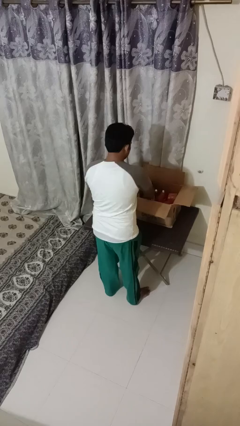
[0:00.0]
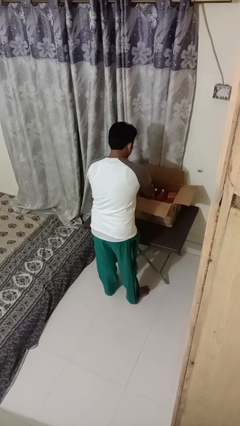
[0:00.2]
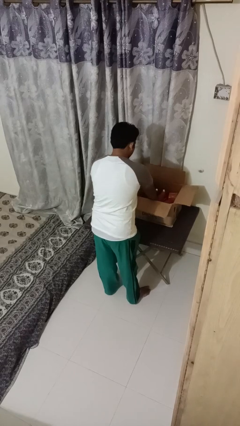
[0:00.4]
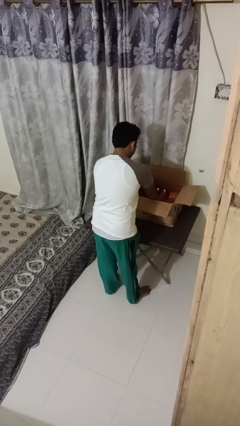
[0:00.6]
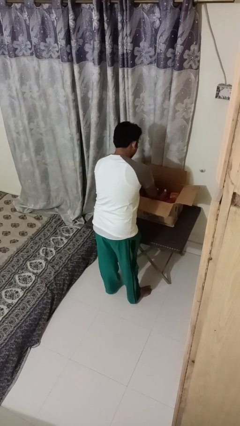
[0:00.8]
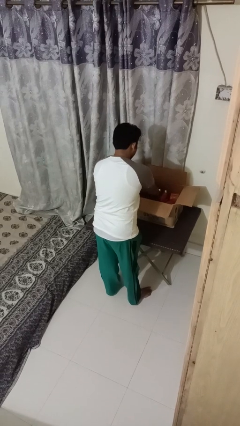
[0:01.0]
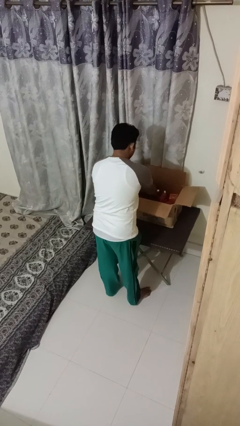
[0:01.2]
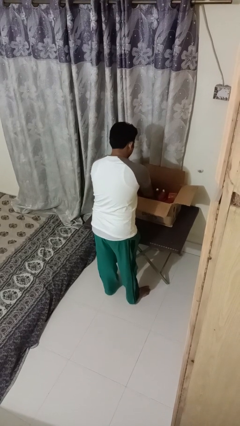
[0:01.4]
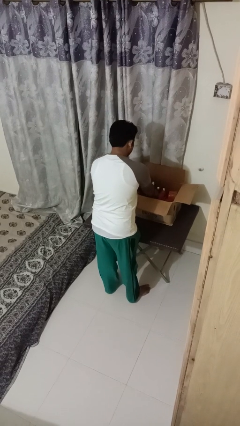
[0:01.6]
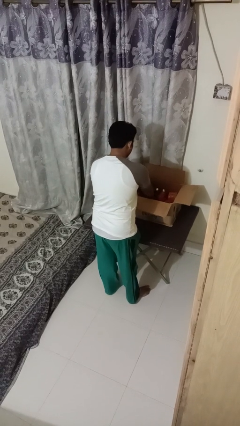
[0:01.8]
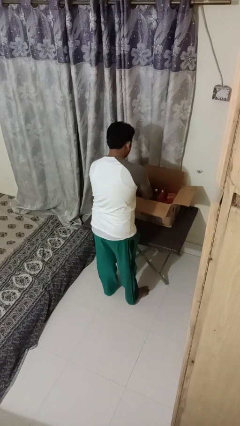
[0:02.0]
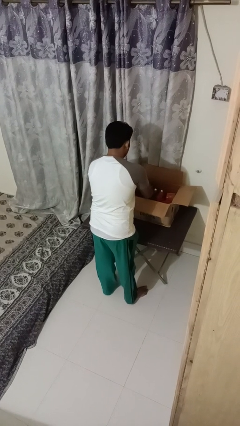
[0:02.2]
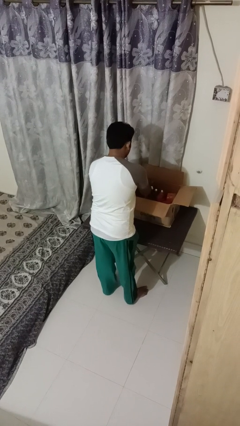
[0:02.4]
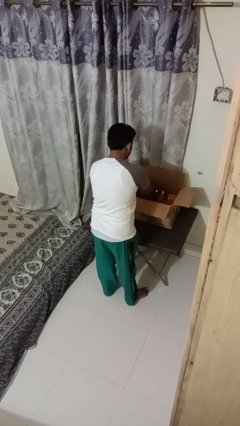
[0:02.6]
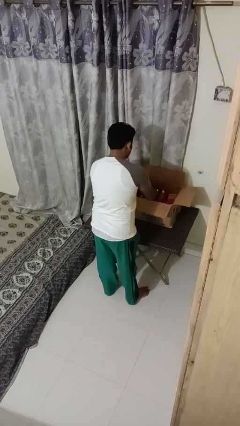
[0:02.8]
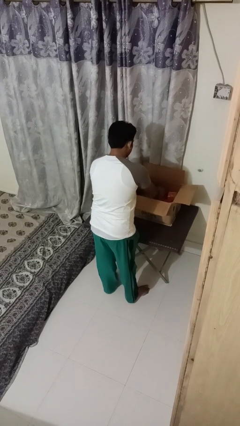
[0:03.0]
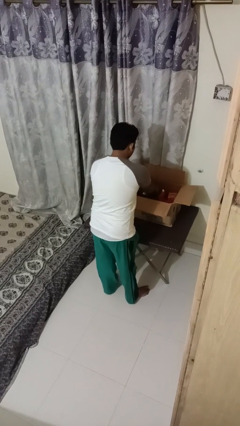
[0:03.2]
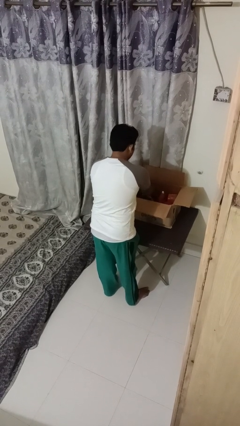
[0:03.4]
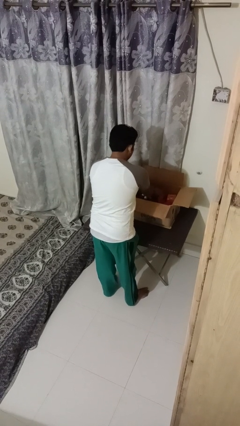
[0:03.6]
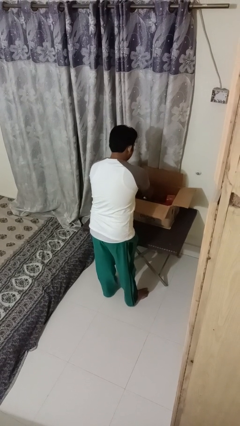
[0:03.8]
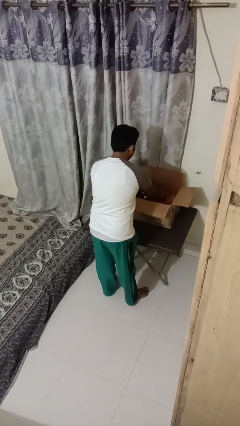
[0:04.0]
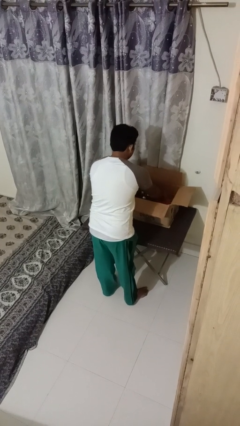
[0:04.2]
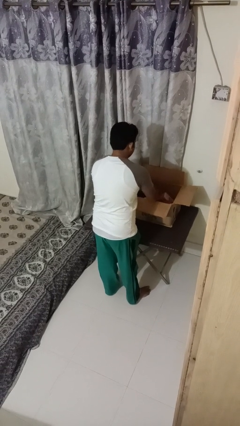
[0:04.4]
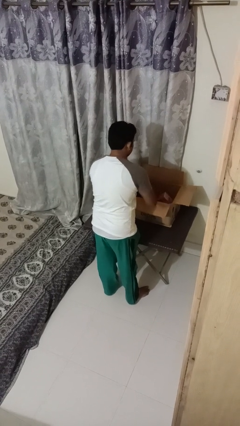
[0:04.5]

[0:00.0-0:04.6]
person searches in box

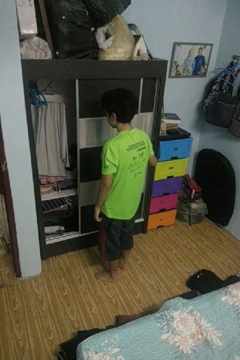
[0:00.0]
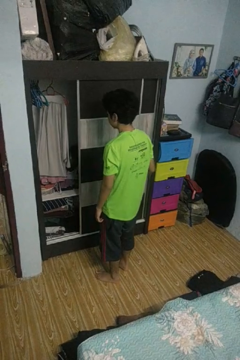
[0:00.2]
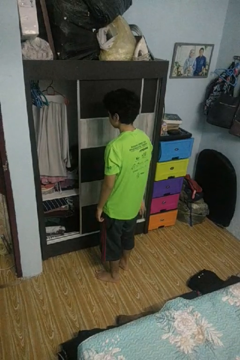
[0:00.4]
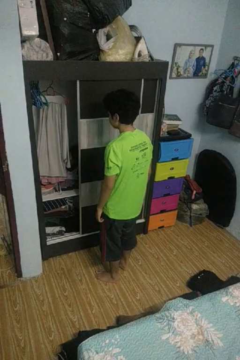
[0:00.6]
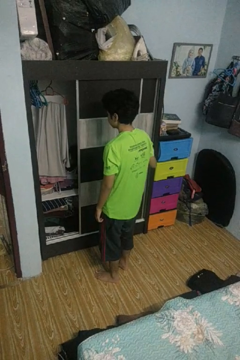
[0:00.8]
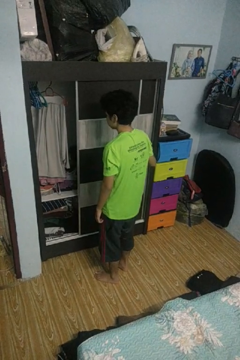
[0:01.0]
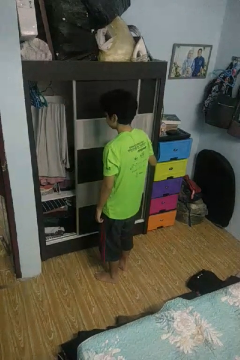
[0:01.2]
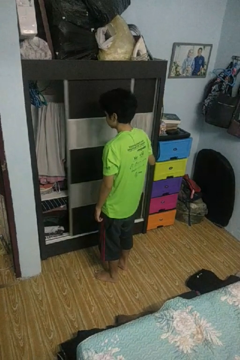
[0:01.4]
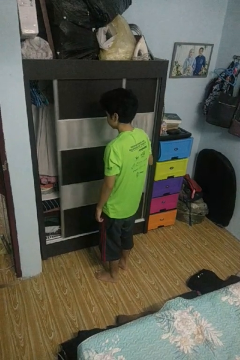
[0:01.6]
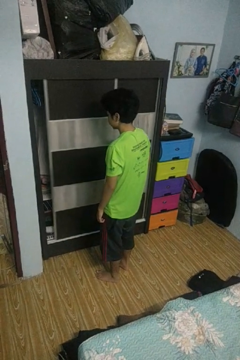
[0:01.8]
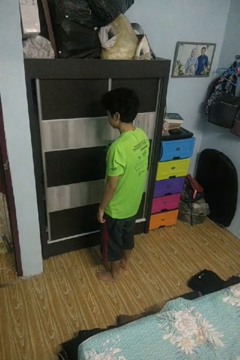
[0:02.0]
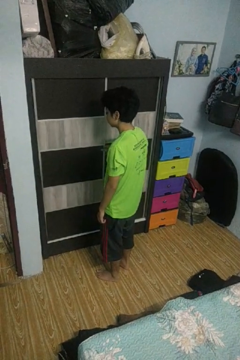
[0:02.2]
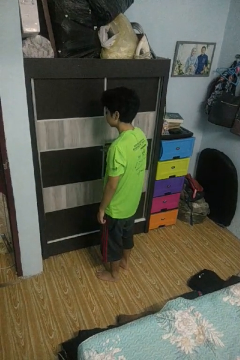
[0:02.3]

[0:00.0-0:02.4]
person closes closet door

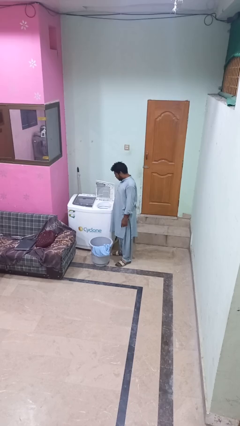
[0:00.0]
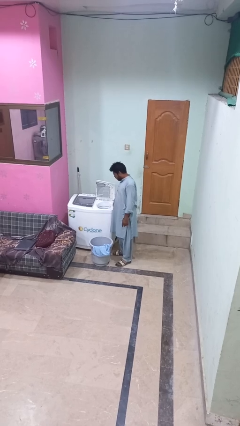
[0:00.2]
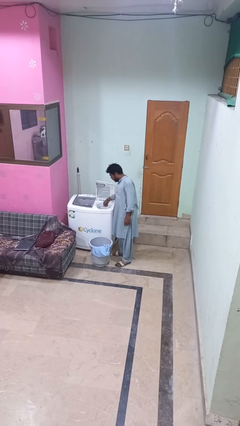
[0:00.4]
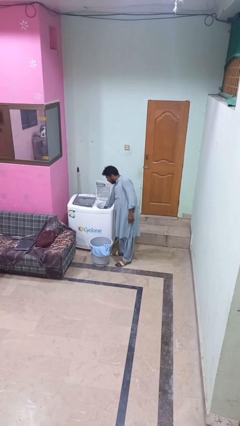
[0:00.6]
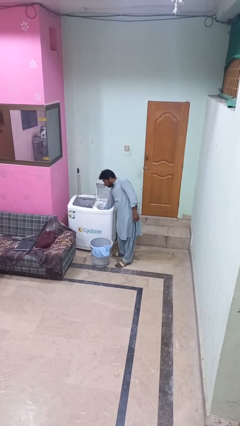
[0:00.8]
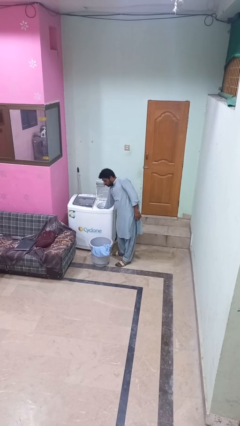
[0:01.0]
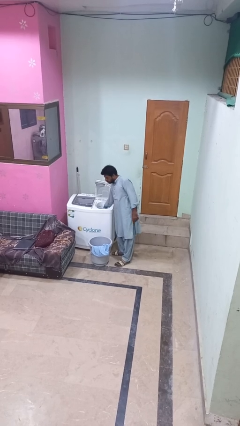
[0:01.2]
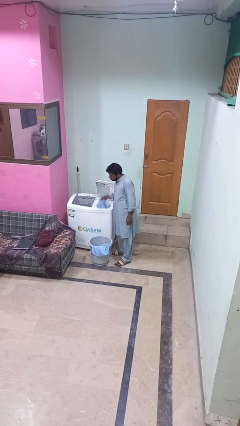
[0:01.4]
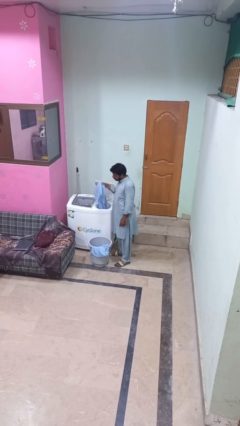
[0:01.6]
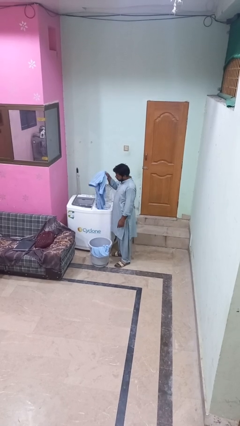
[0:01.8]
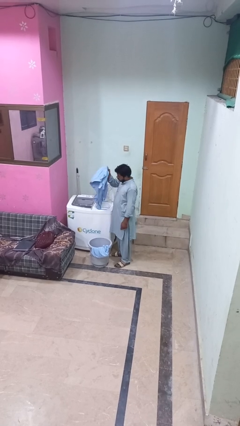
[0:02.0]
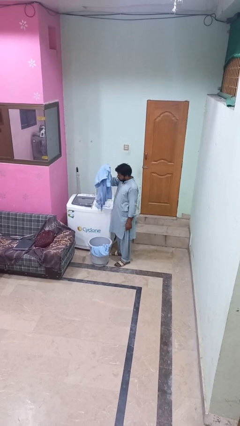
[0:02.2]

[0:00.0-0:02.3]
person unloads dryer

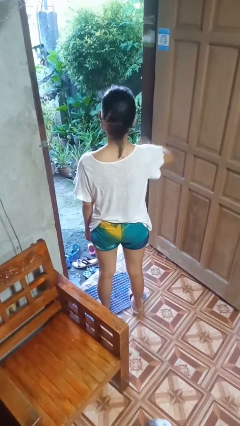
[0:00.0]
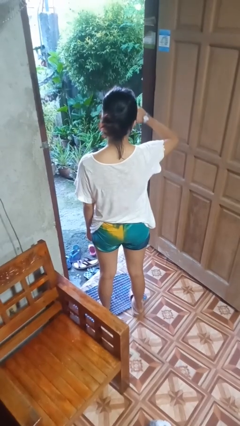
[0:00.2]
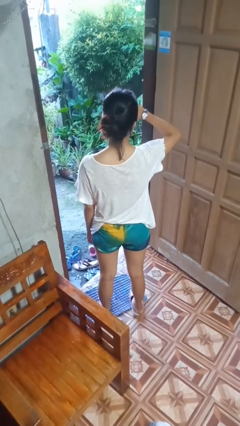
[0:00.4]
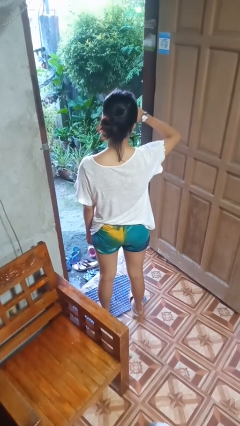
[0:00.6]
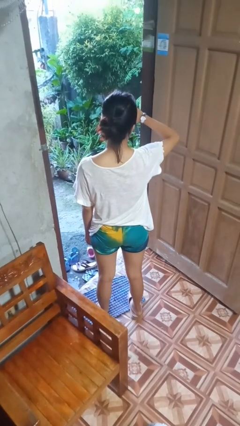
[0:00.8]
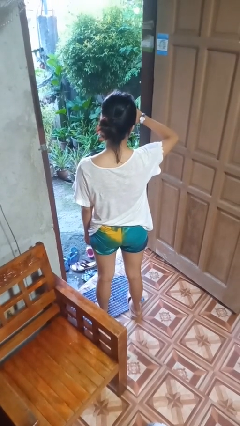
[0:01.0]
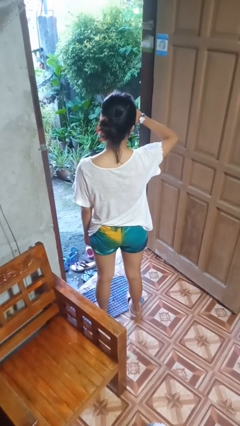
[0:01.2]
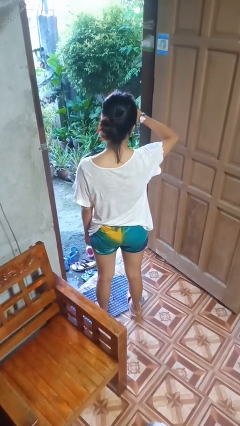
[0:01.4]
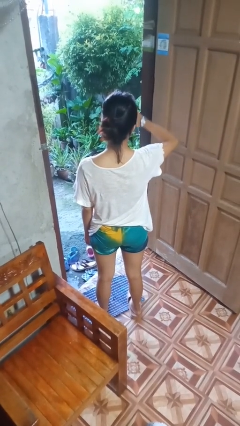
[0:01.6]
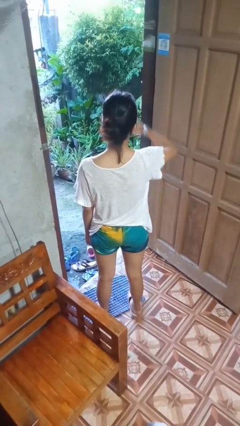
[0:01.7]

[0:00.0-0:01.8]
person looks at wristwatch

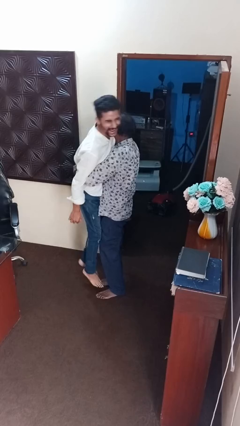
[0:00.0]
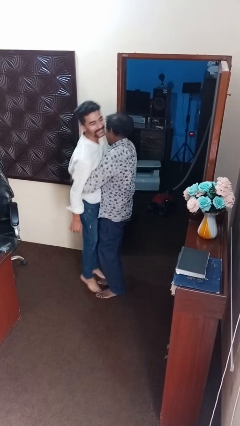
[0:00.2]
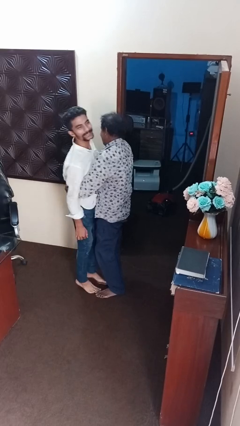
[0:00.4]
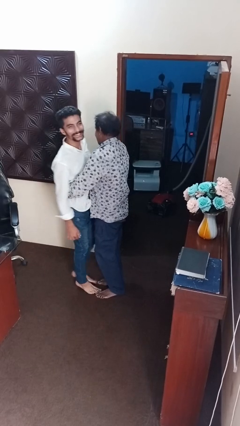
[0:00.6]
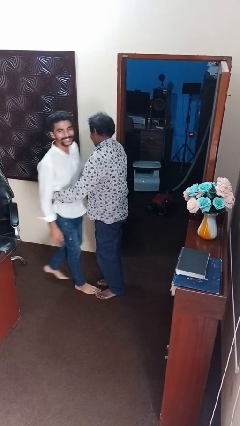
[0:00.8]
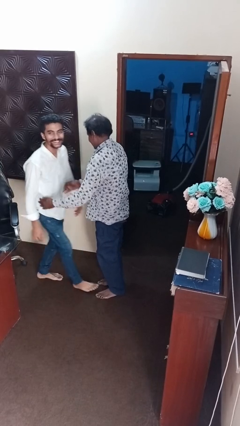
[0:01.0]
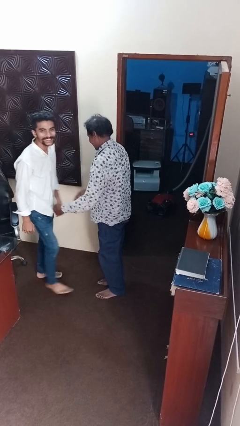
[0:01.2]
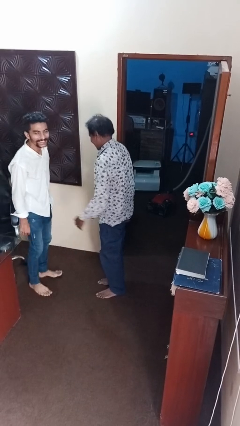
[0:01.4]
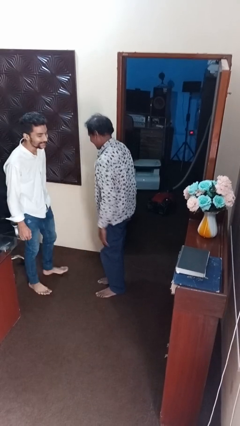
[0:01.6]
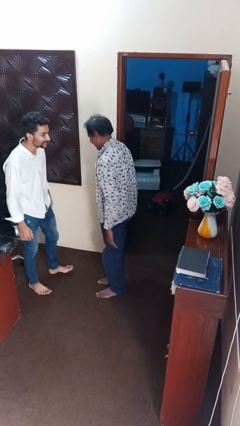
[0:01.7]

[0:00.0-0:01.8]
person puts down person

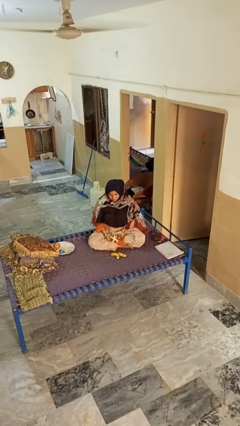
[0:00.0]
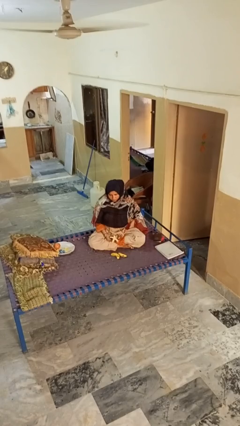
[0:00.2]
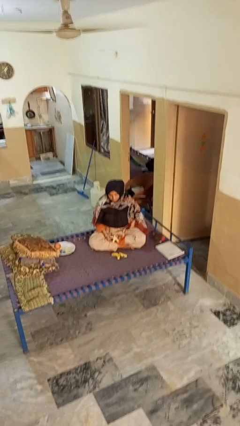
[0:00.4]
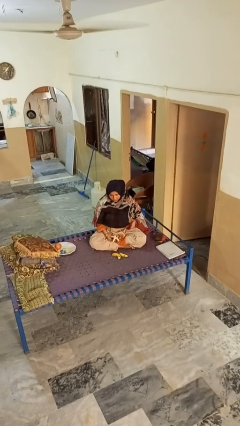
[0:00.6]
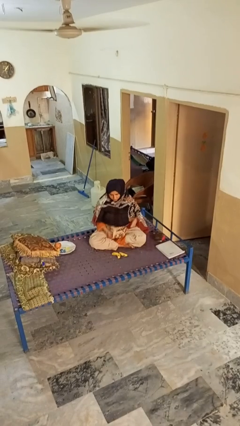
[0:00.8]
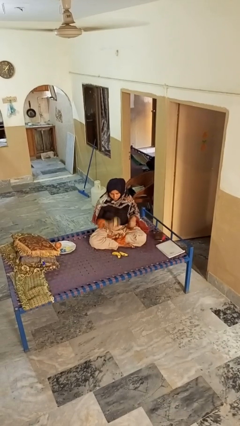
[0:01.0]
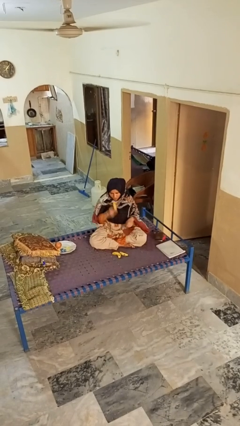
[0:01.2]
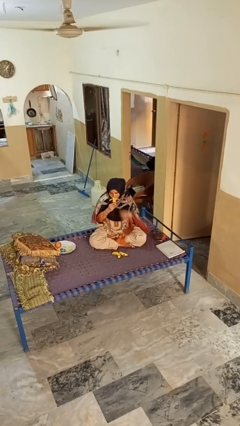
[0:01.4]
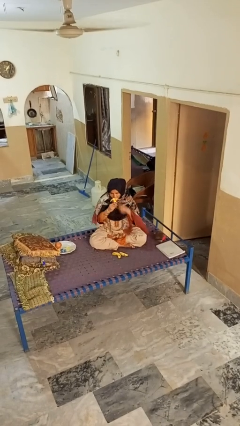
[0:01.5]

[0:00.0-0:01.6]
person eats banana

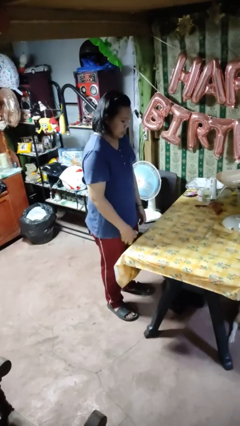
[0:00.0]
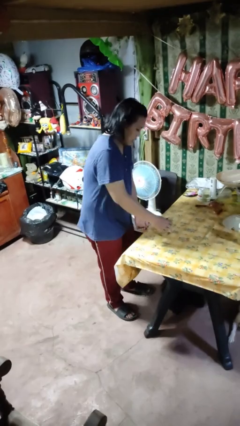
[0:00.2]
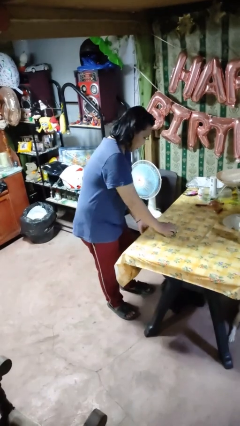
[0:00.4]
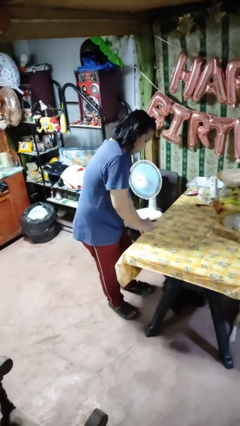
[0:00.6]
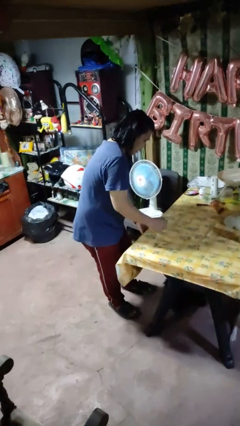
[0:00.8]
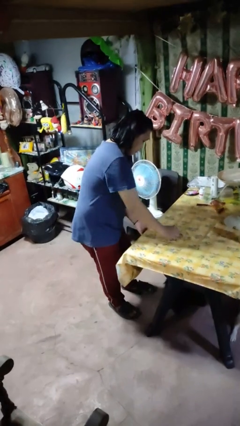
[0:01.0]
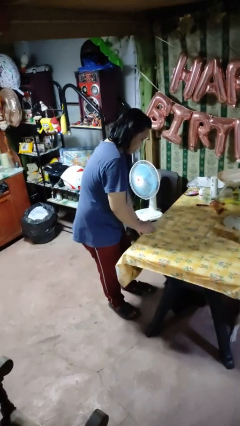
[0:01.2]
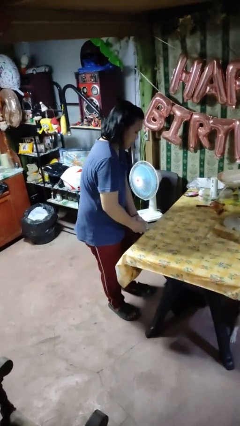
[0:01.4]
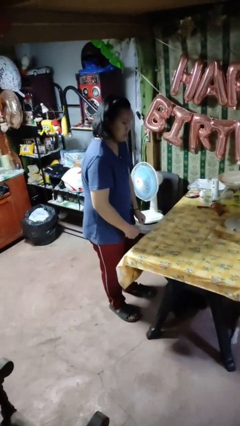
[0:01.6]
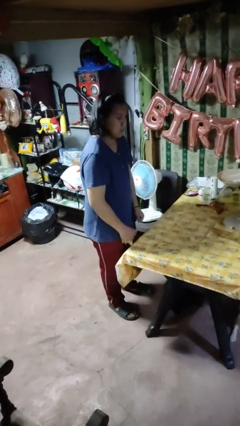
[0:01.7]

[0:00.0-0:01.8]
person cleans table with rag

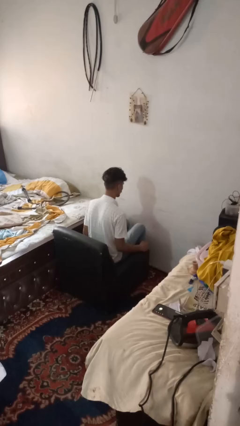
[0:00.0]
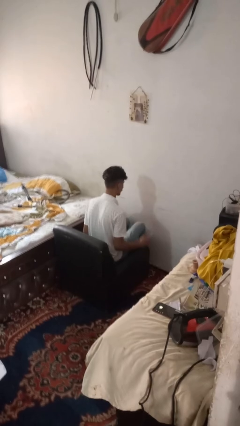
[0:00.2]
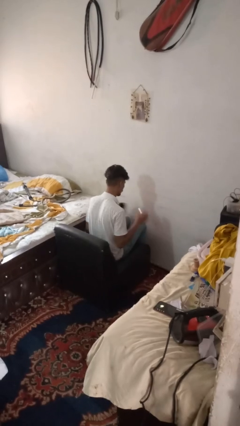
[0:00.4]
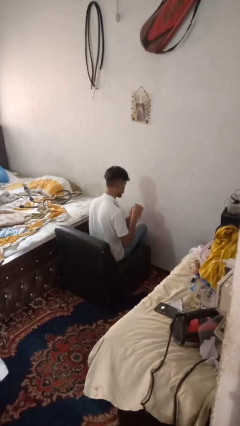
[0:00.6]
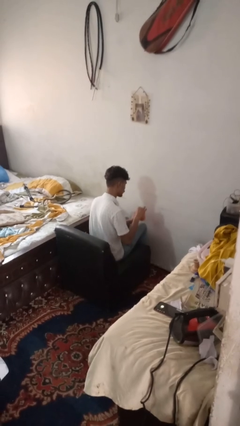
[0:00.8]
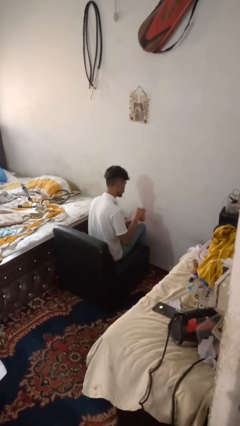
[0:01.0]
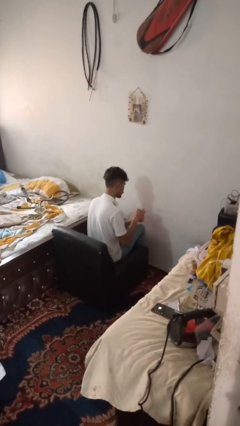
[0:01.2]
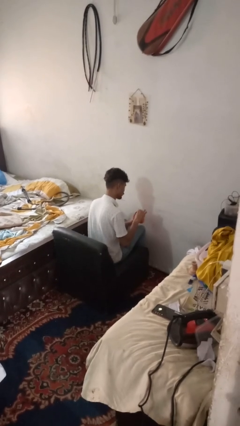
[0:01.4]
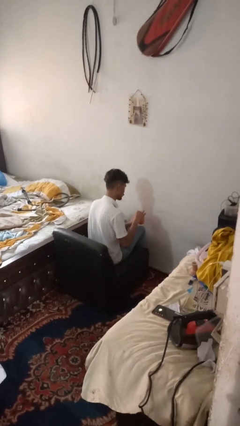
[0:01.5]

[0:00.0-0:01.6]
person stirs mug
